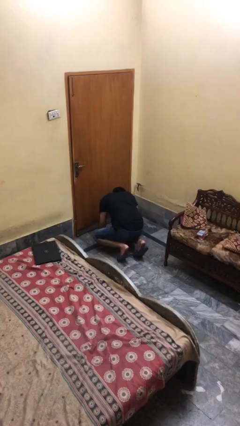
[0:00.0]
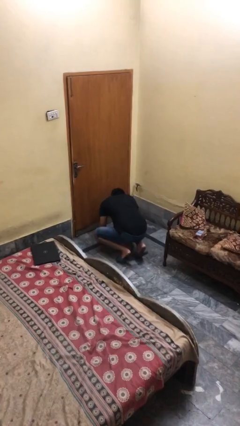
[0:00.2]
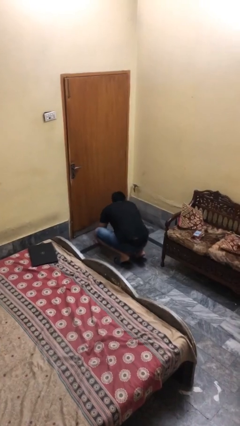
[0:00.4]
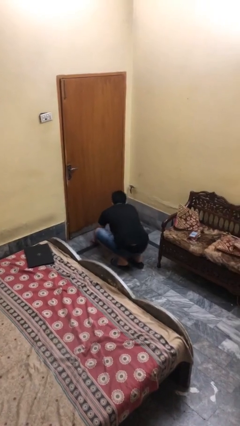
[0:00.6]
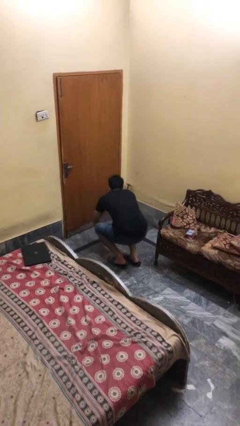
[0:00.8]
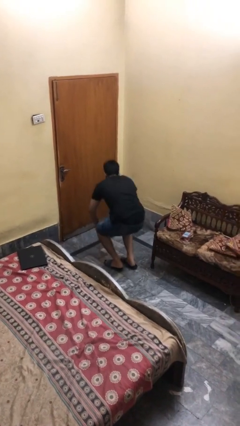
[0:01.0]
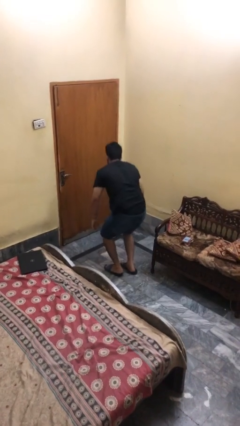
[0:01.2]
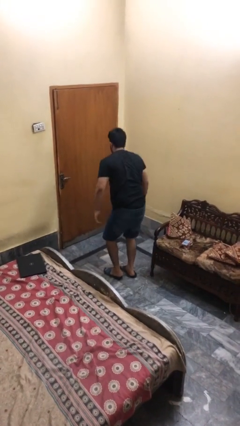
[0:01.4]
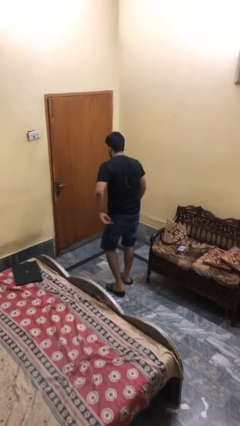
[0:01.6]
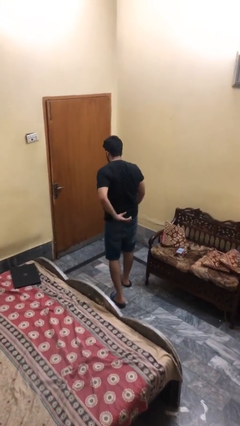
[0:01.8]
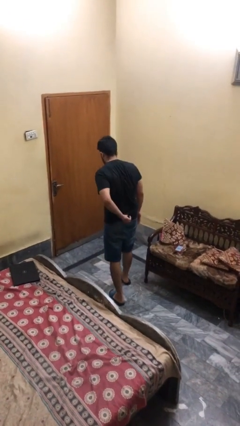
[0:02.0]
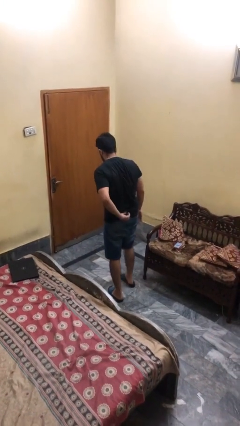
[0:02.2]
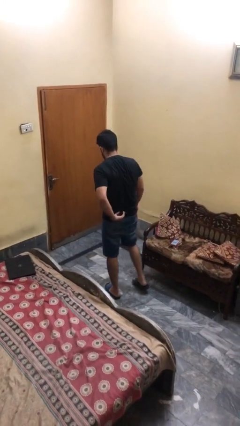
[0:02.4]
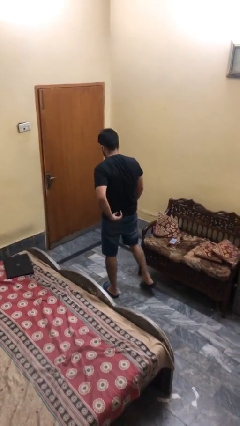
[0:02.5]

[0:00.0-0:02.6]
person stands up from floor

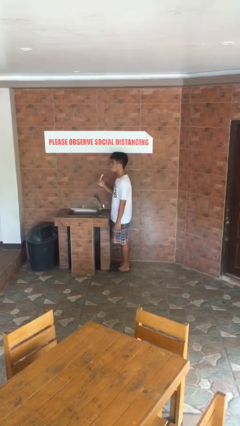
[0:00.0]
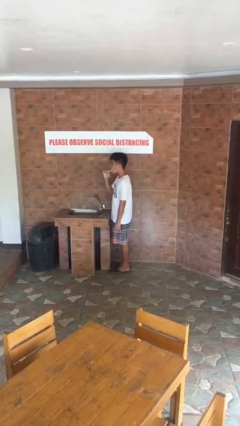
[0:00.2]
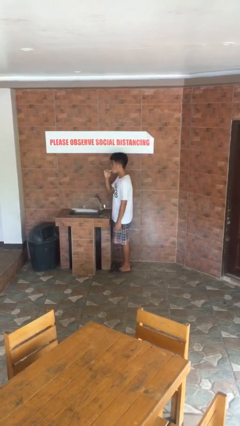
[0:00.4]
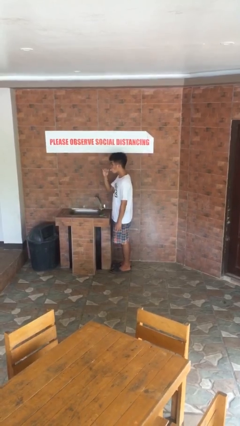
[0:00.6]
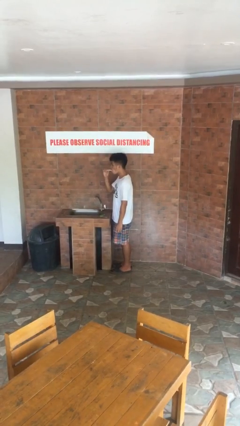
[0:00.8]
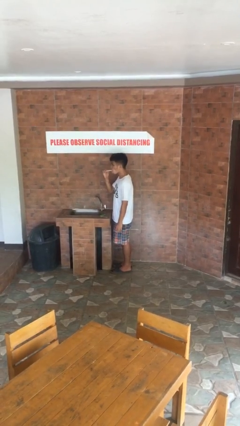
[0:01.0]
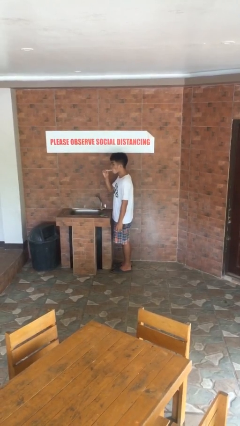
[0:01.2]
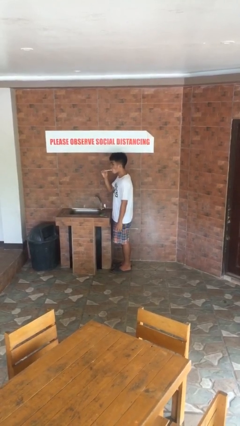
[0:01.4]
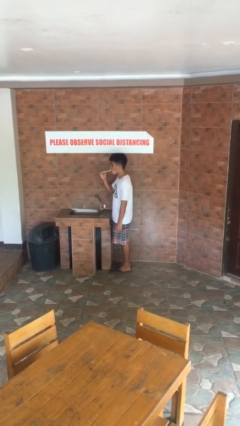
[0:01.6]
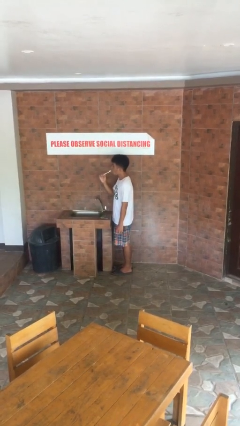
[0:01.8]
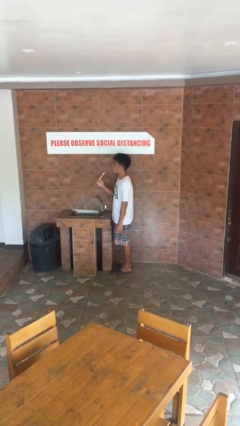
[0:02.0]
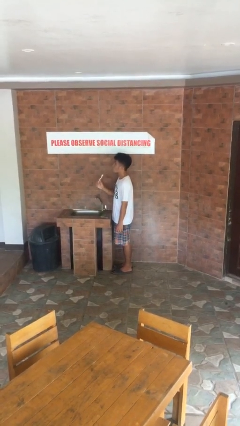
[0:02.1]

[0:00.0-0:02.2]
person brushes teeth

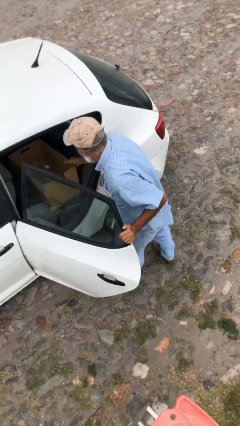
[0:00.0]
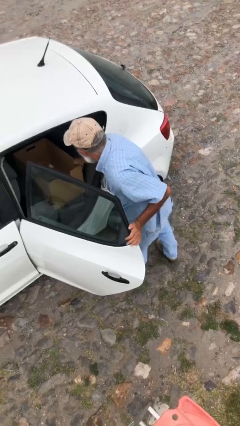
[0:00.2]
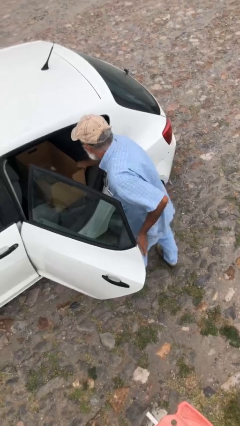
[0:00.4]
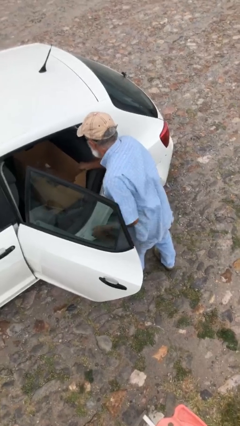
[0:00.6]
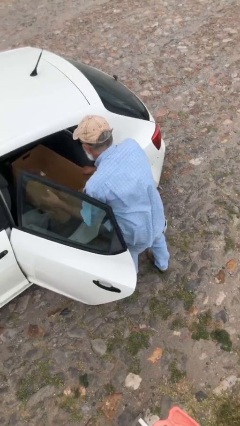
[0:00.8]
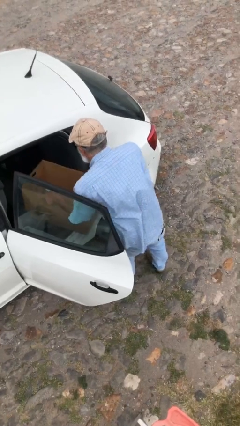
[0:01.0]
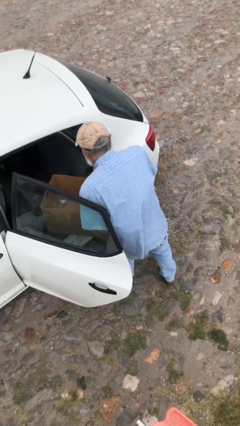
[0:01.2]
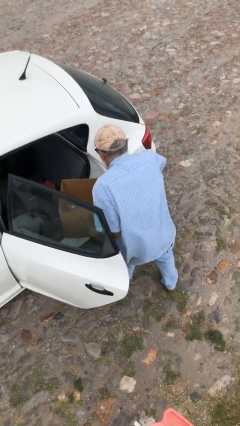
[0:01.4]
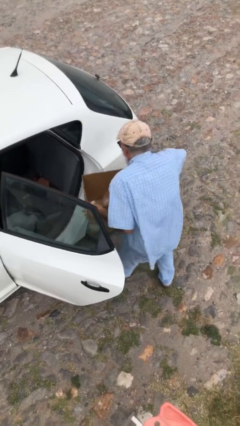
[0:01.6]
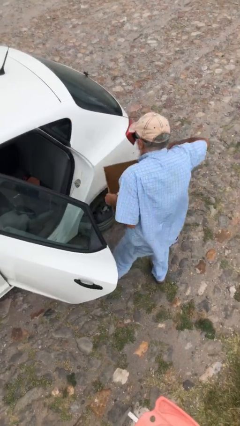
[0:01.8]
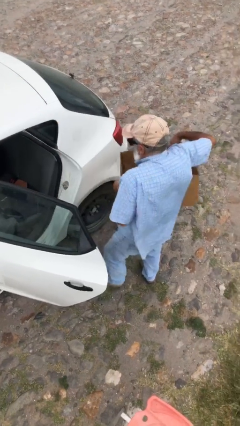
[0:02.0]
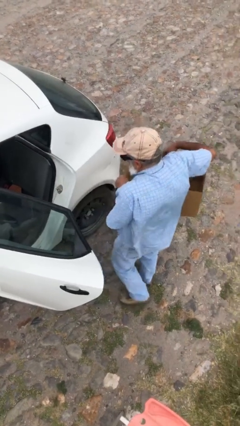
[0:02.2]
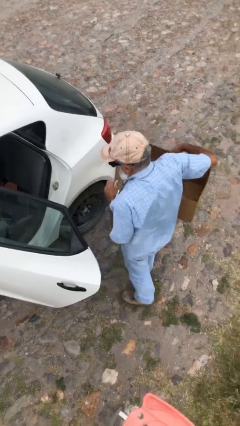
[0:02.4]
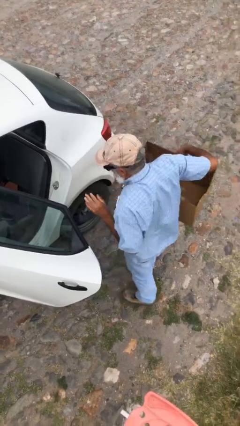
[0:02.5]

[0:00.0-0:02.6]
person unloads car

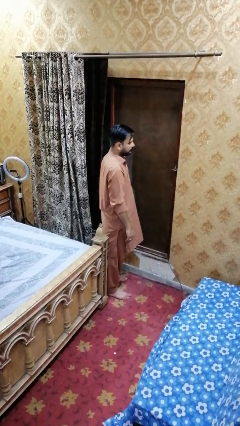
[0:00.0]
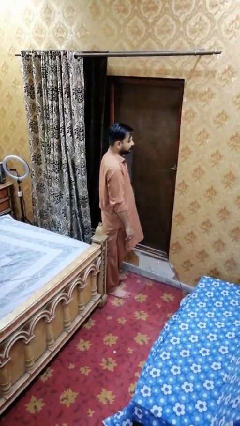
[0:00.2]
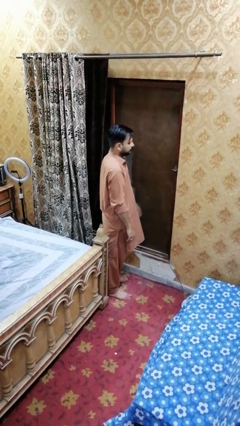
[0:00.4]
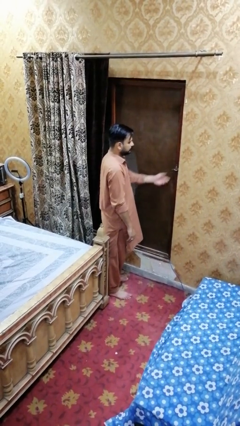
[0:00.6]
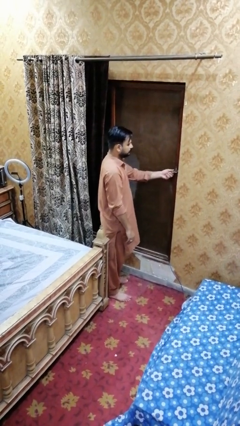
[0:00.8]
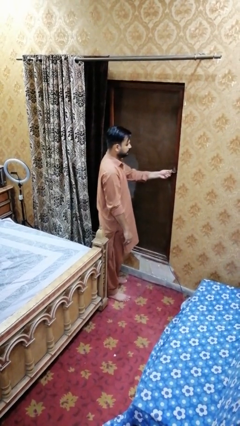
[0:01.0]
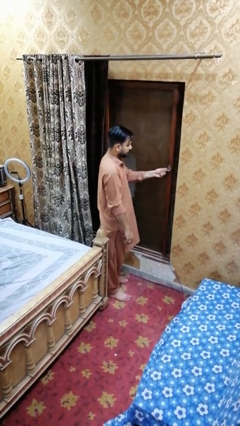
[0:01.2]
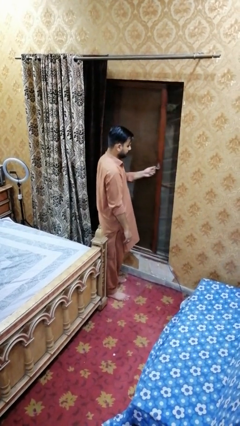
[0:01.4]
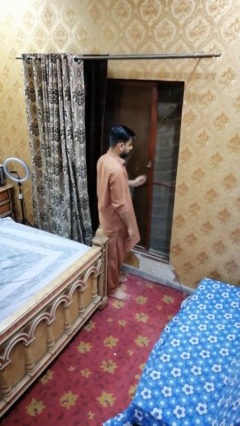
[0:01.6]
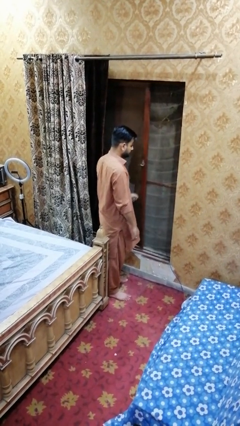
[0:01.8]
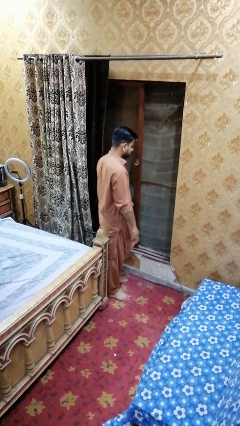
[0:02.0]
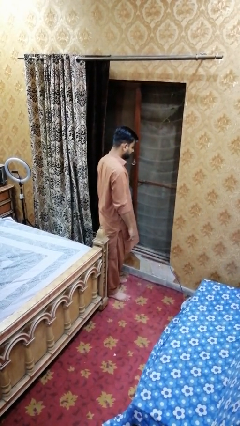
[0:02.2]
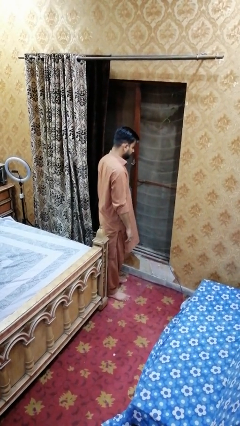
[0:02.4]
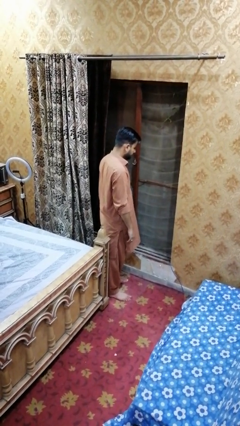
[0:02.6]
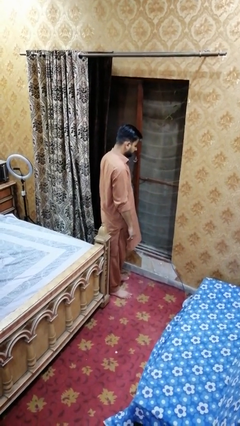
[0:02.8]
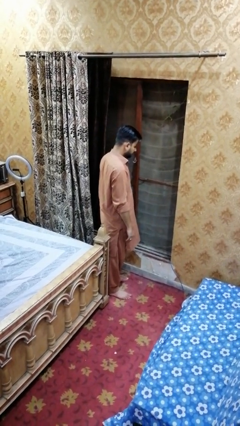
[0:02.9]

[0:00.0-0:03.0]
person opens home window

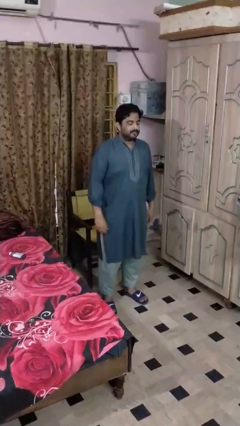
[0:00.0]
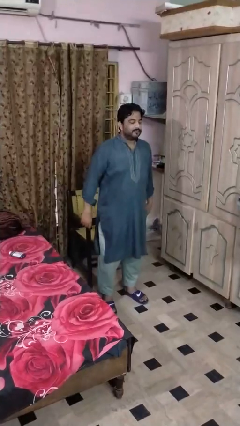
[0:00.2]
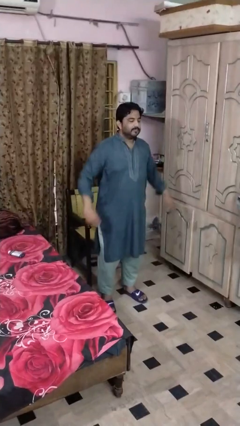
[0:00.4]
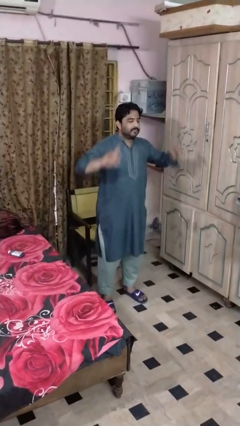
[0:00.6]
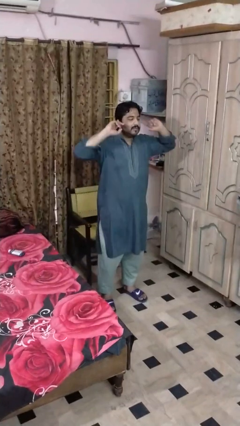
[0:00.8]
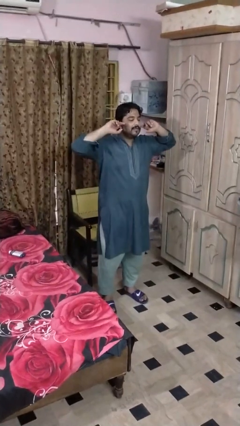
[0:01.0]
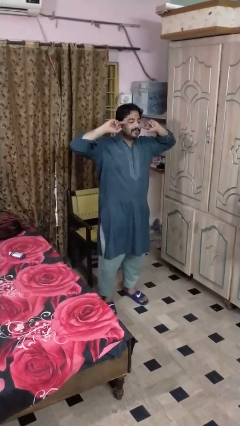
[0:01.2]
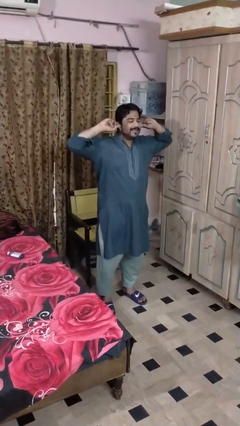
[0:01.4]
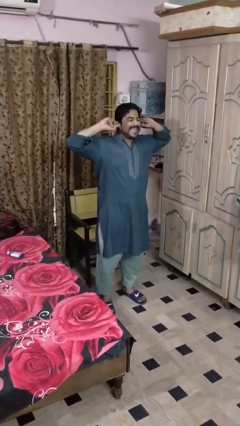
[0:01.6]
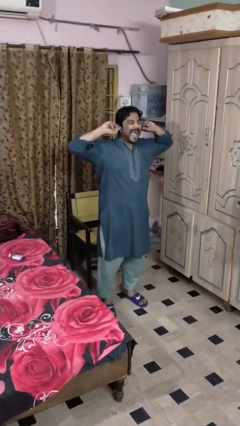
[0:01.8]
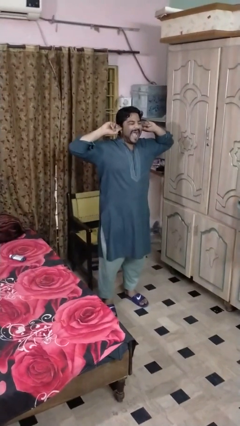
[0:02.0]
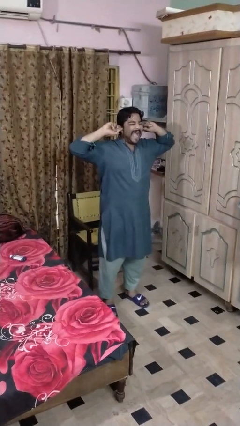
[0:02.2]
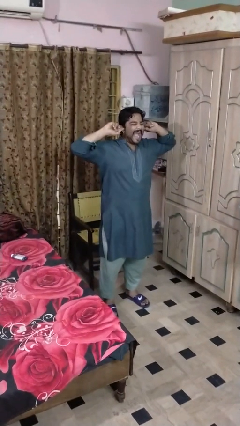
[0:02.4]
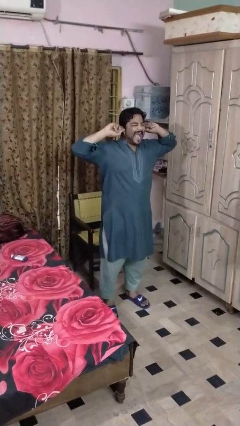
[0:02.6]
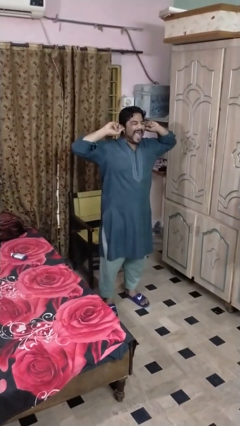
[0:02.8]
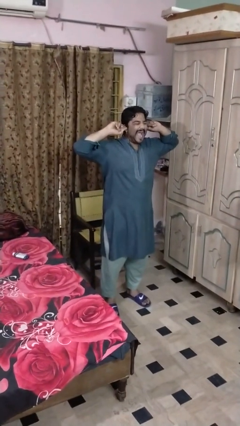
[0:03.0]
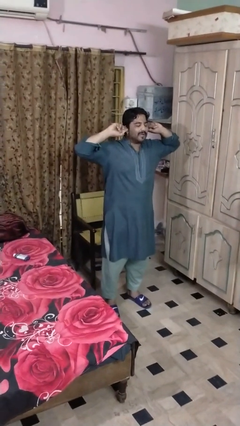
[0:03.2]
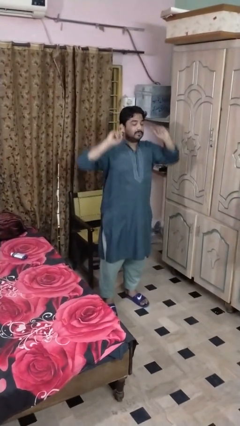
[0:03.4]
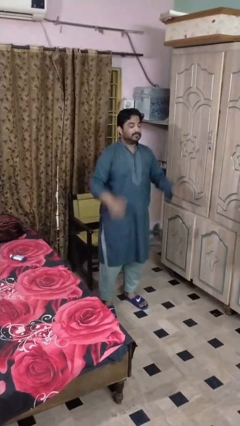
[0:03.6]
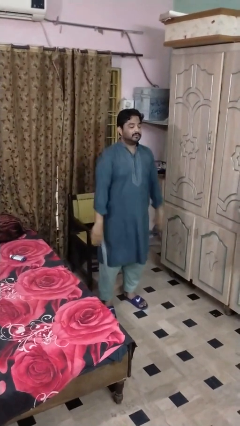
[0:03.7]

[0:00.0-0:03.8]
person puts fingers in ear

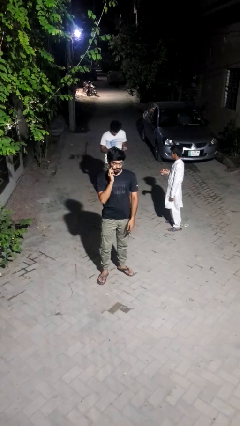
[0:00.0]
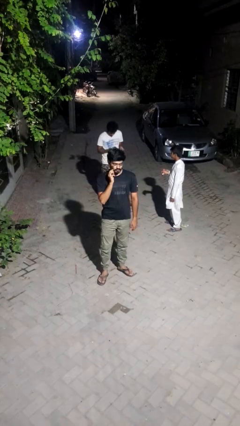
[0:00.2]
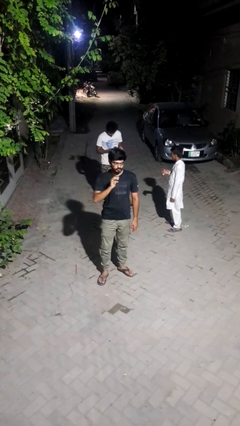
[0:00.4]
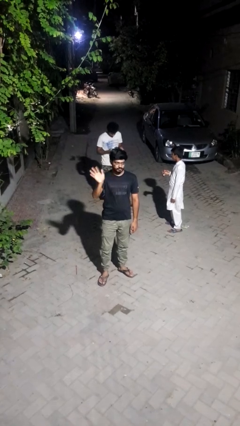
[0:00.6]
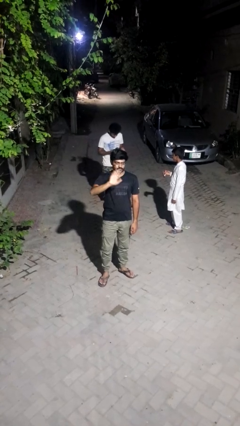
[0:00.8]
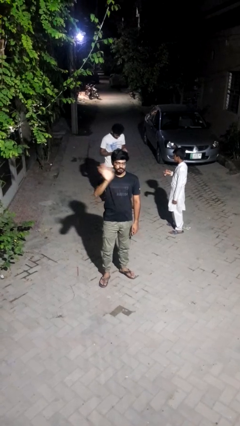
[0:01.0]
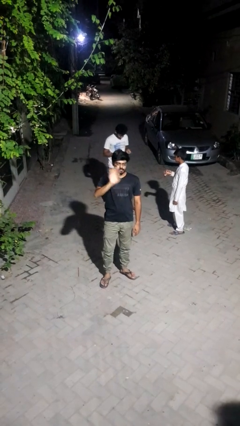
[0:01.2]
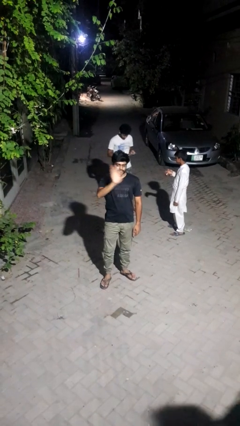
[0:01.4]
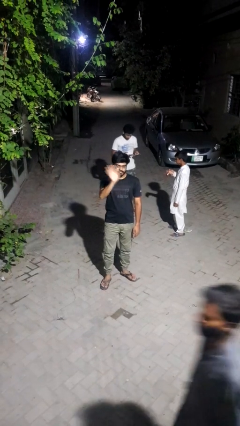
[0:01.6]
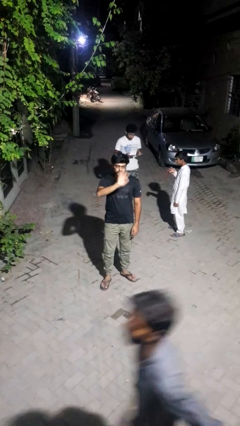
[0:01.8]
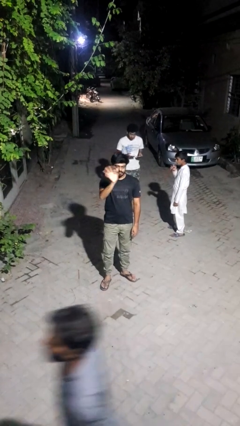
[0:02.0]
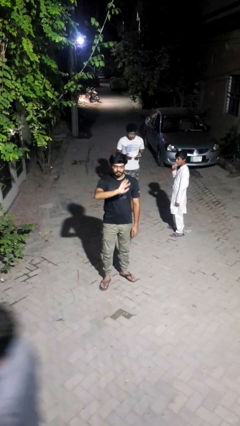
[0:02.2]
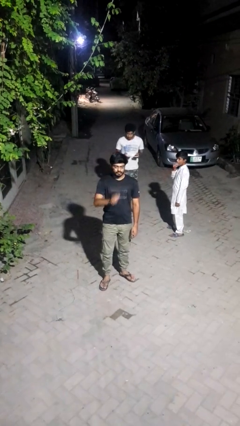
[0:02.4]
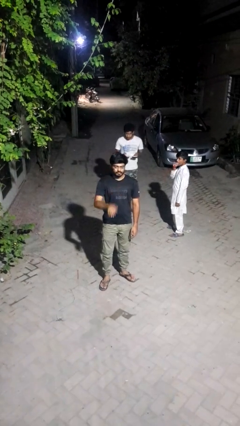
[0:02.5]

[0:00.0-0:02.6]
person waves at person

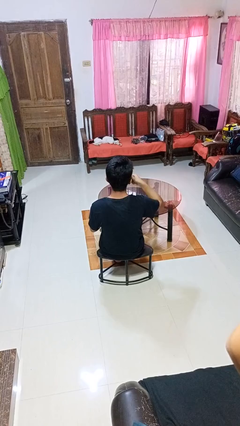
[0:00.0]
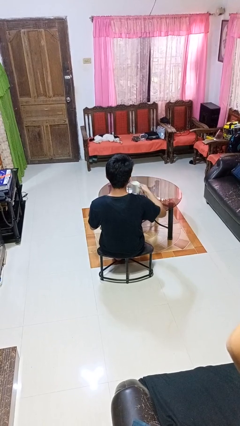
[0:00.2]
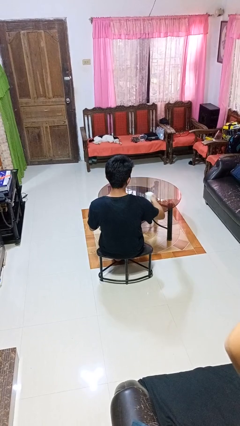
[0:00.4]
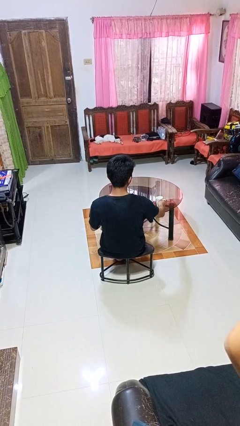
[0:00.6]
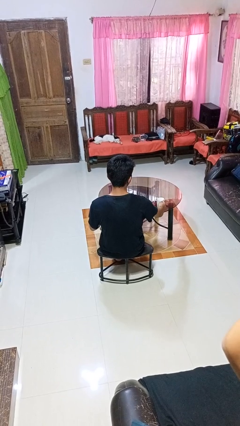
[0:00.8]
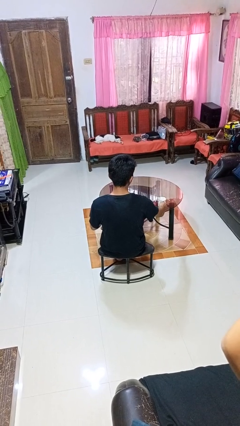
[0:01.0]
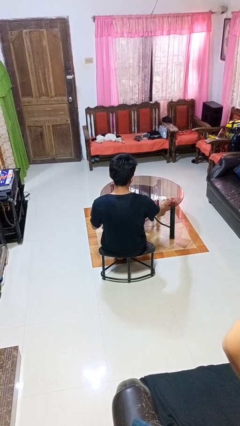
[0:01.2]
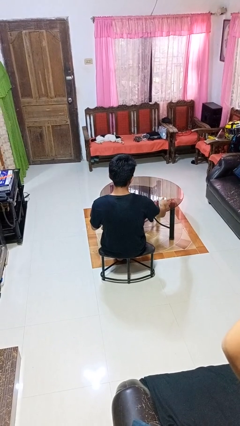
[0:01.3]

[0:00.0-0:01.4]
person puts down object on table
